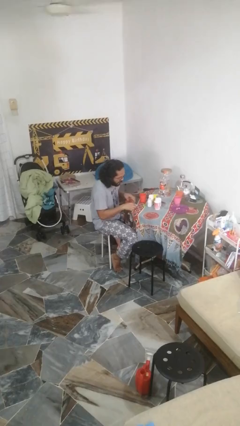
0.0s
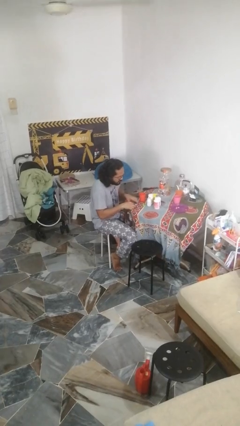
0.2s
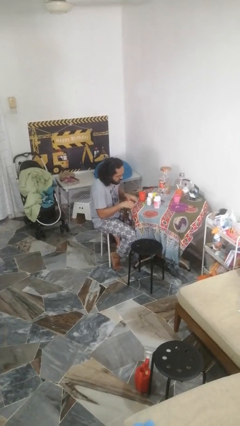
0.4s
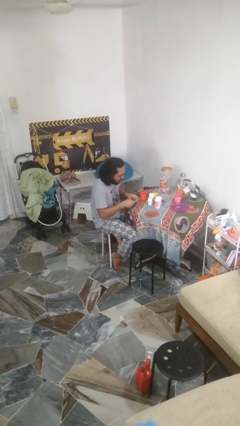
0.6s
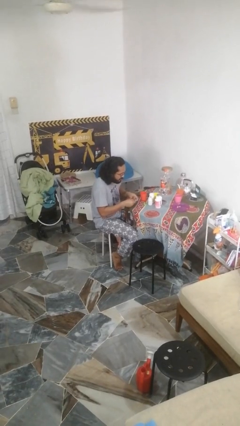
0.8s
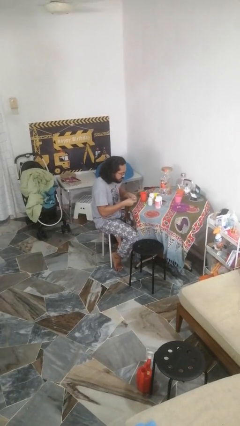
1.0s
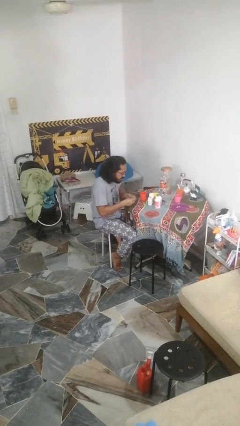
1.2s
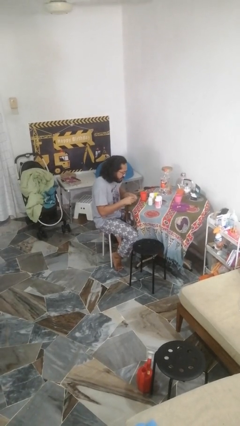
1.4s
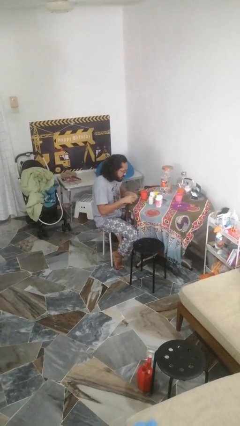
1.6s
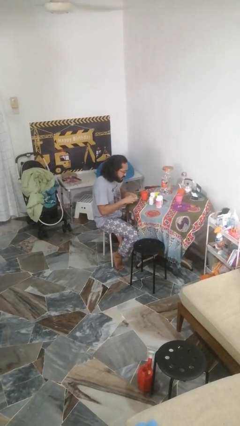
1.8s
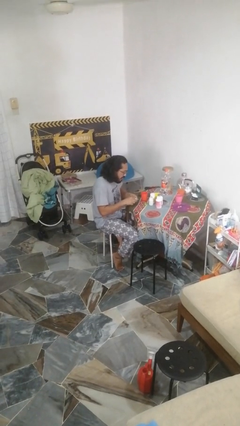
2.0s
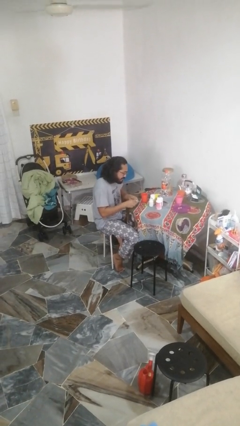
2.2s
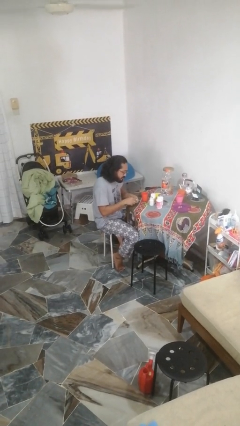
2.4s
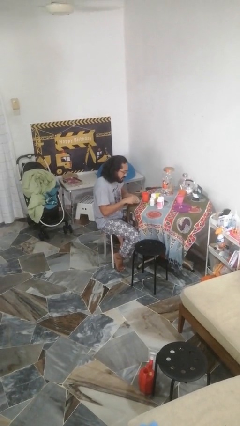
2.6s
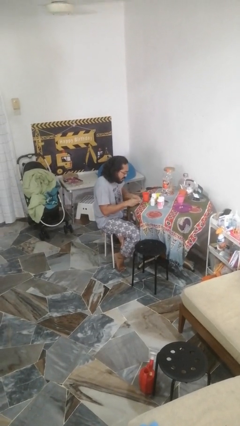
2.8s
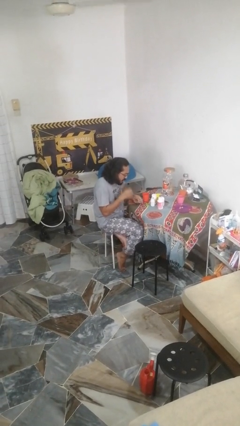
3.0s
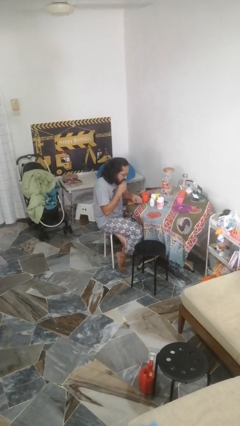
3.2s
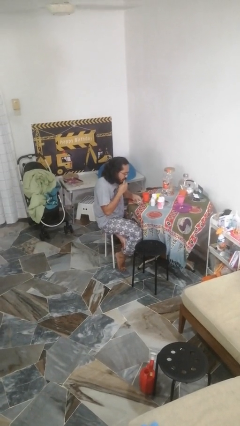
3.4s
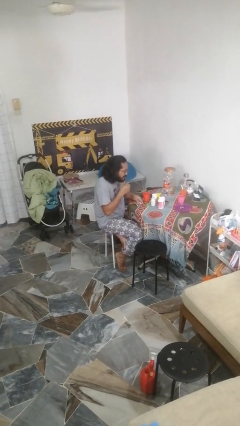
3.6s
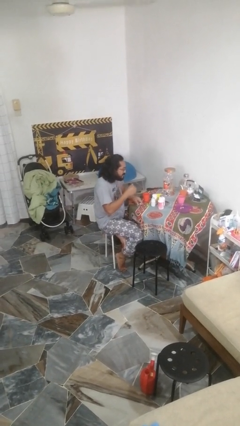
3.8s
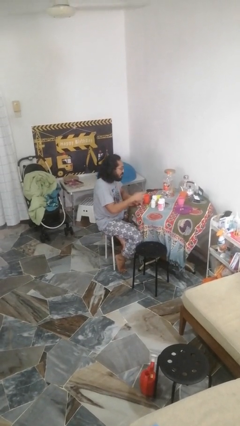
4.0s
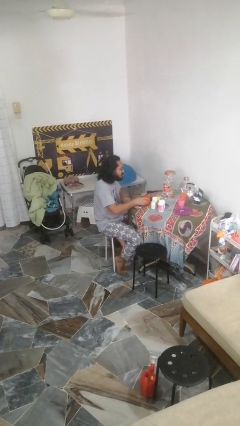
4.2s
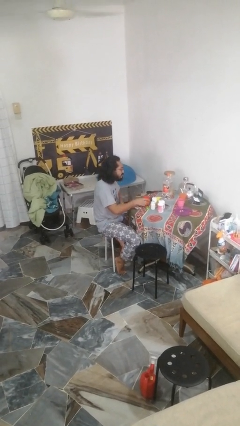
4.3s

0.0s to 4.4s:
person takes medicine pills

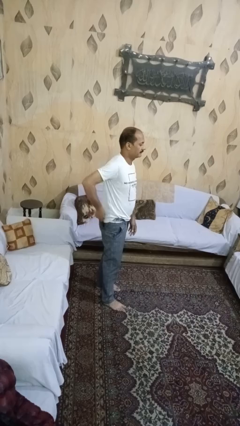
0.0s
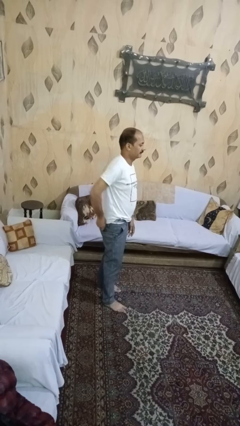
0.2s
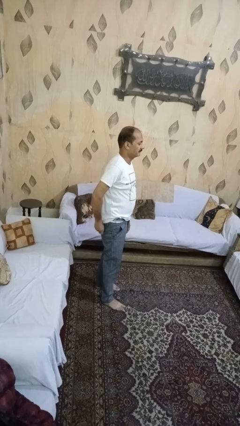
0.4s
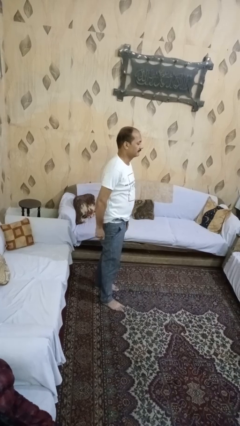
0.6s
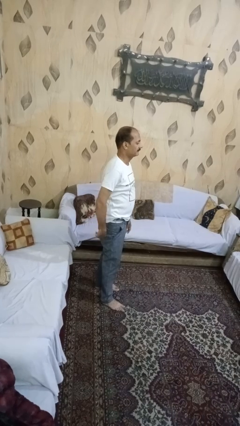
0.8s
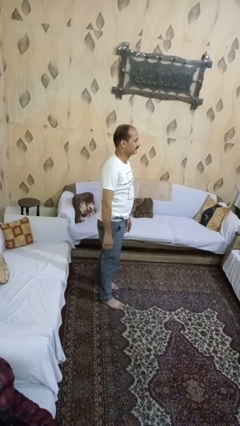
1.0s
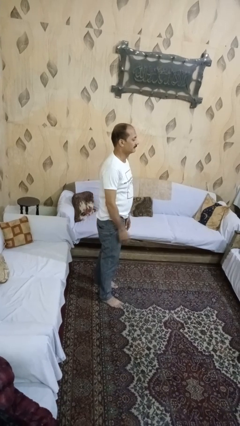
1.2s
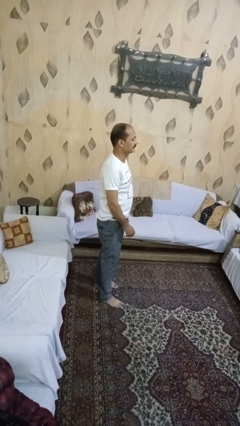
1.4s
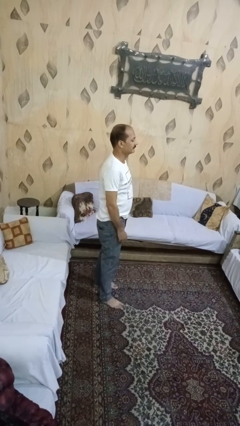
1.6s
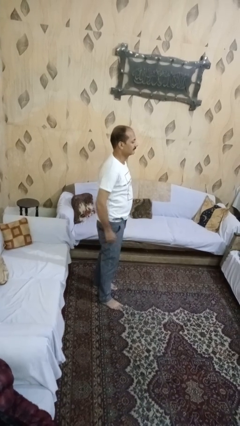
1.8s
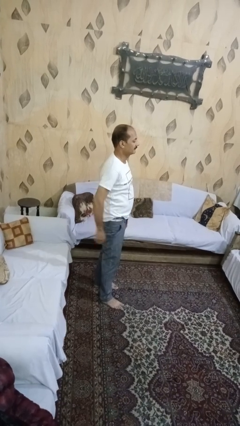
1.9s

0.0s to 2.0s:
person puts phone into pocket

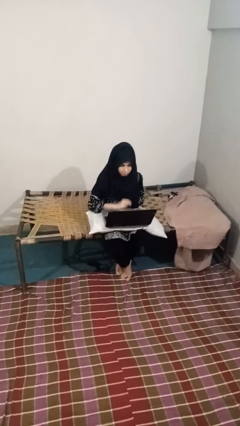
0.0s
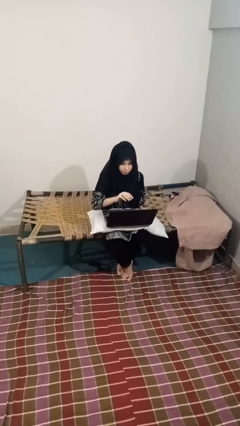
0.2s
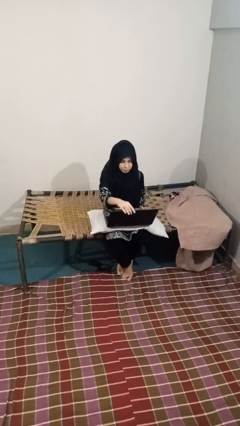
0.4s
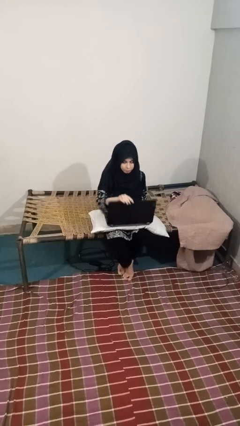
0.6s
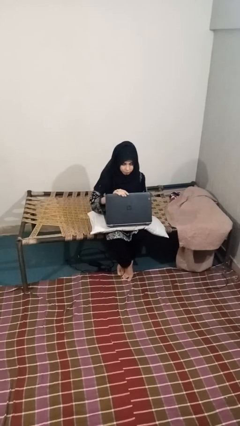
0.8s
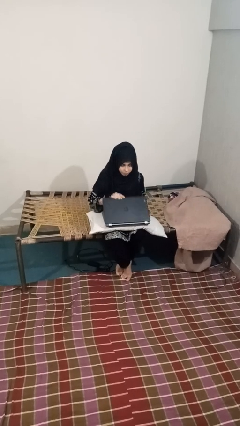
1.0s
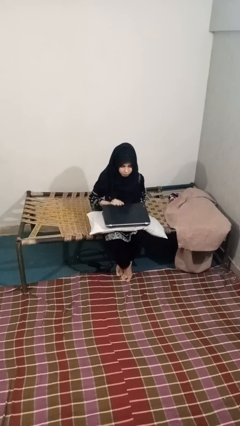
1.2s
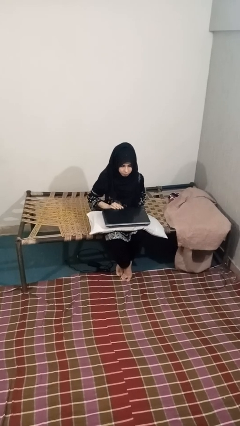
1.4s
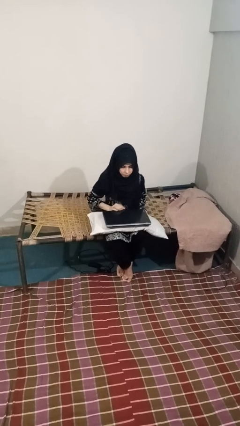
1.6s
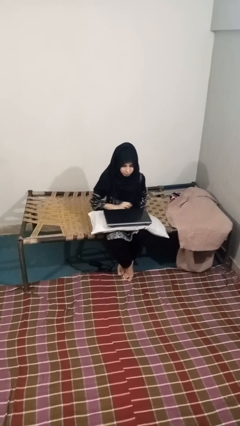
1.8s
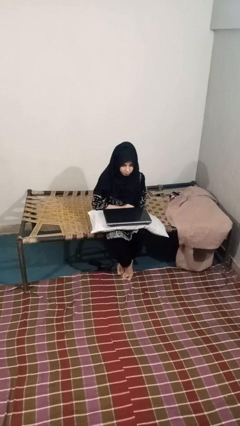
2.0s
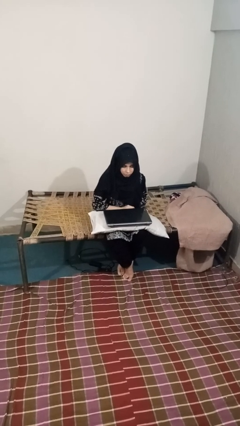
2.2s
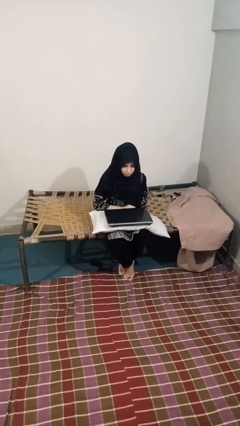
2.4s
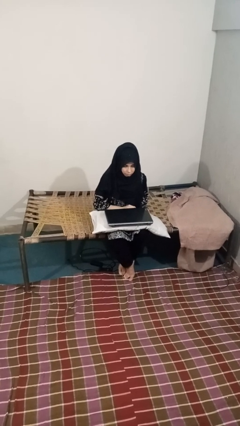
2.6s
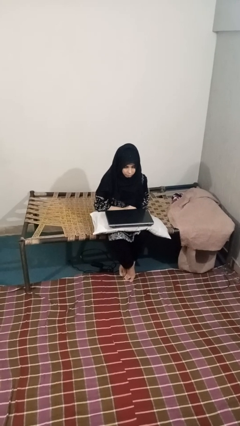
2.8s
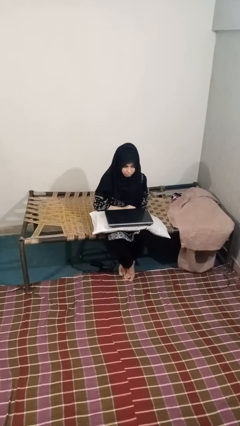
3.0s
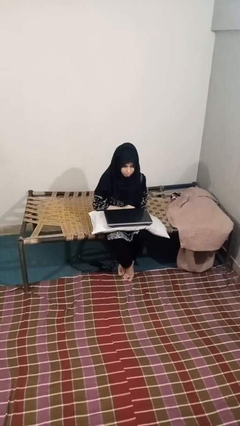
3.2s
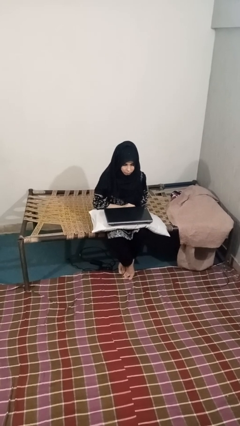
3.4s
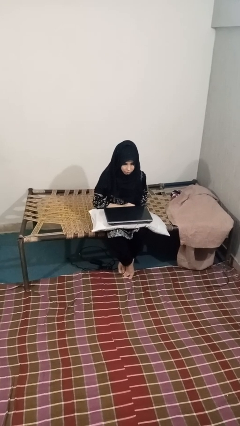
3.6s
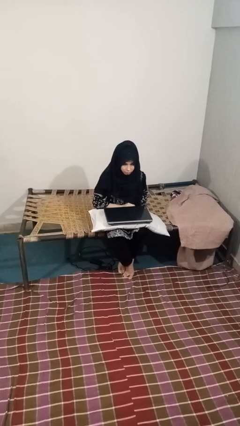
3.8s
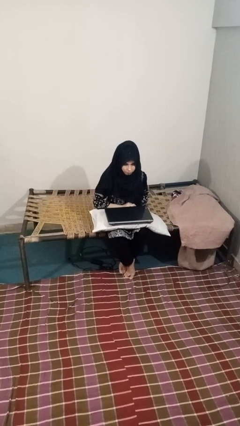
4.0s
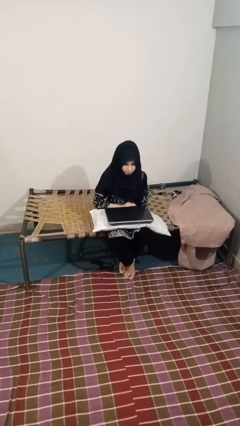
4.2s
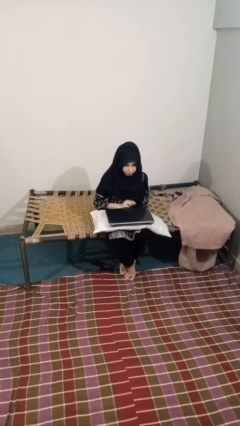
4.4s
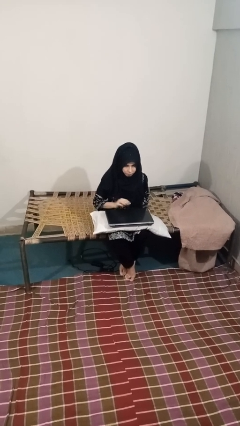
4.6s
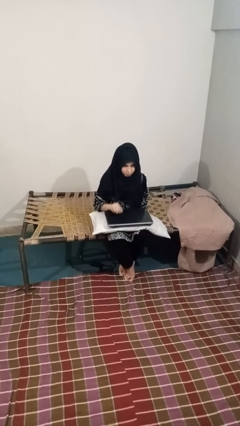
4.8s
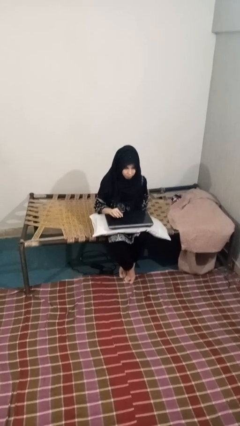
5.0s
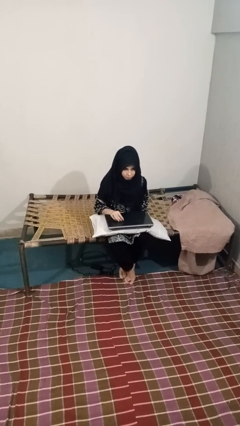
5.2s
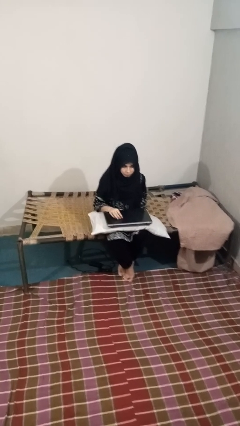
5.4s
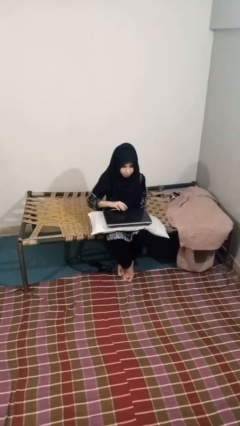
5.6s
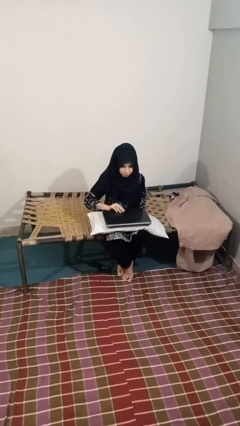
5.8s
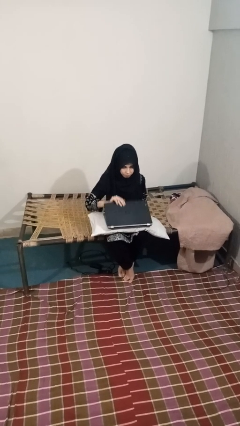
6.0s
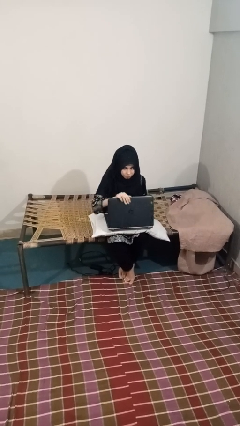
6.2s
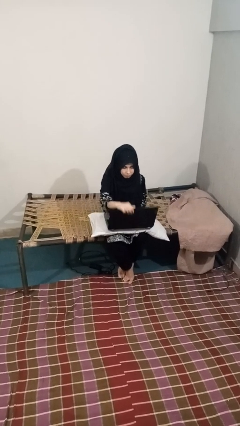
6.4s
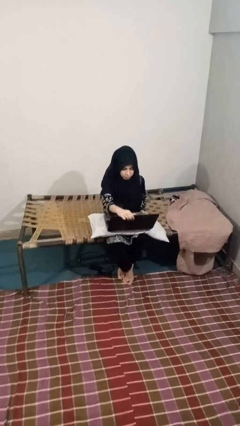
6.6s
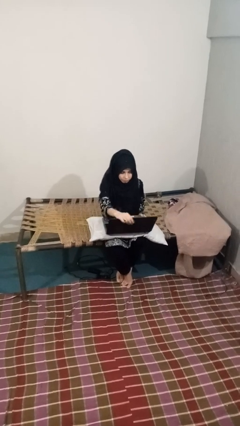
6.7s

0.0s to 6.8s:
person closes laptop

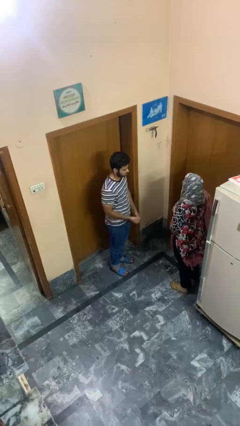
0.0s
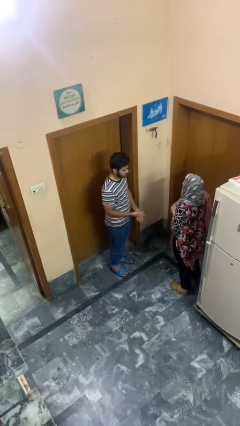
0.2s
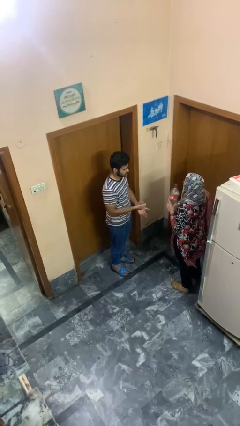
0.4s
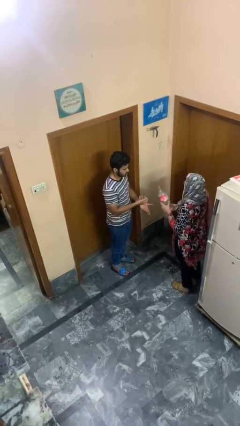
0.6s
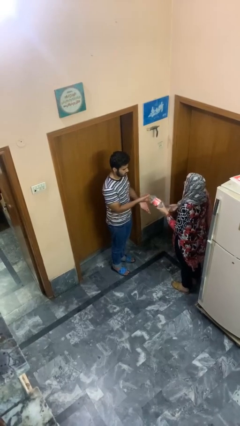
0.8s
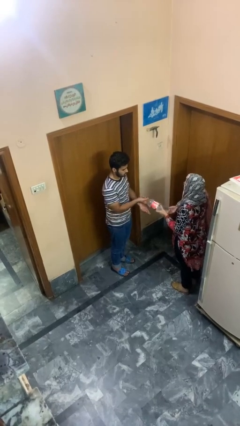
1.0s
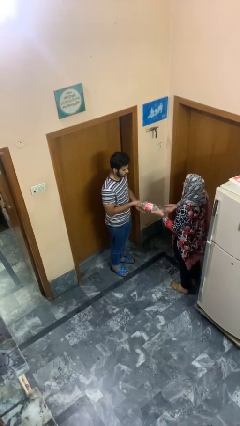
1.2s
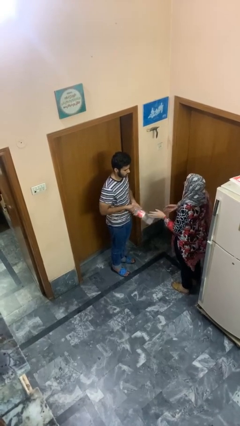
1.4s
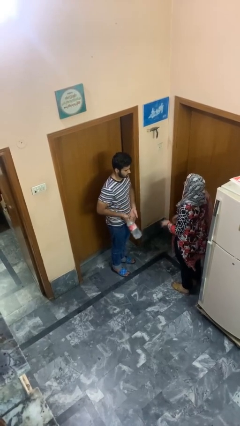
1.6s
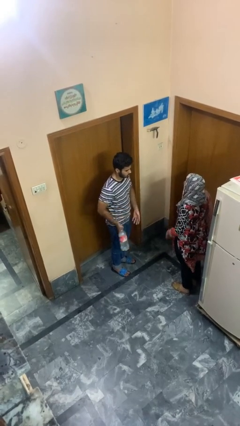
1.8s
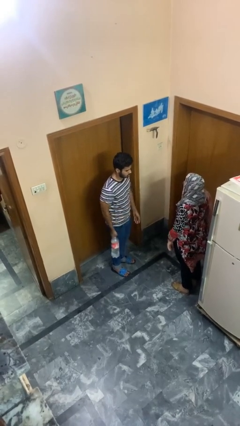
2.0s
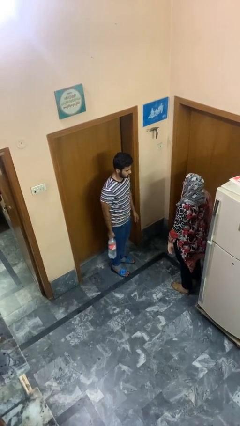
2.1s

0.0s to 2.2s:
person transfers object to person

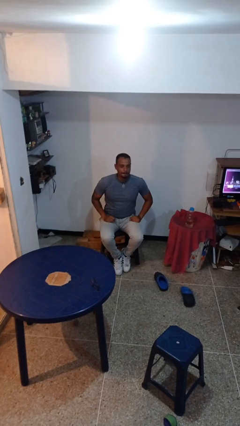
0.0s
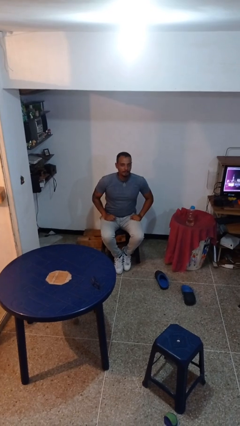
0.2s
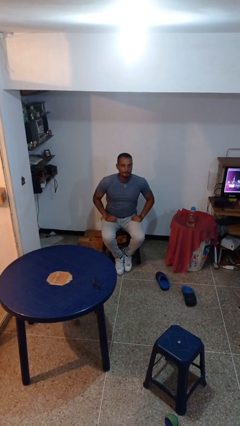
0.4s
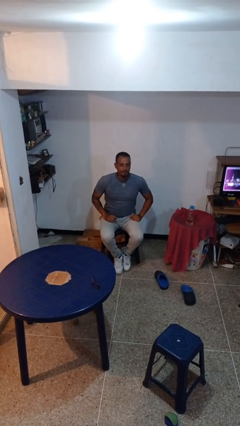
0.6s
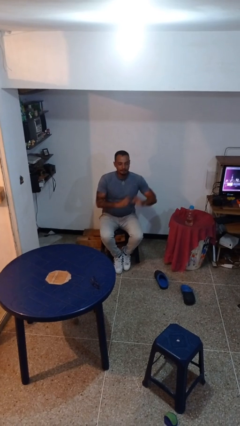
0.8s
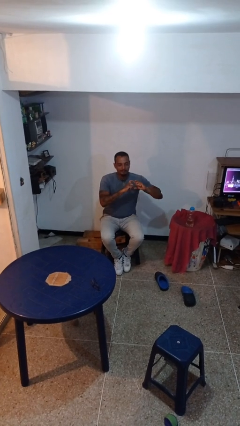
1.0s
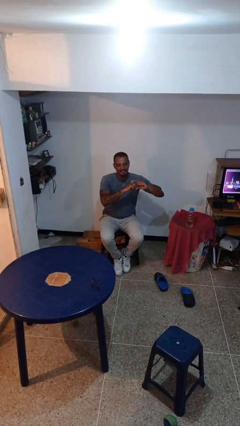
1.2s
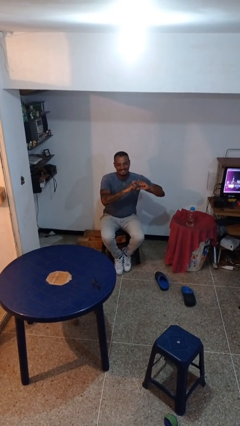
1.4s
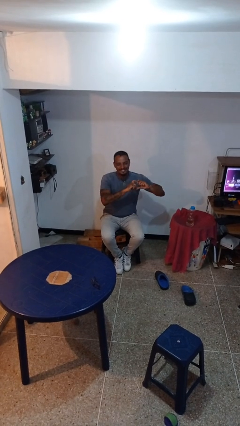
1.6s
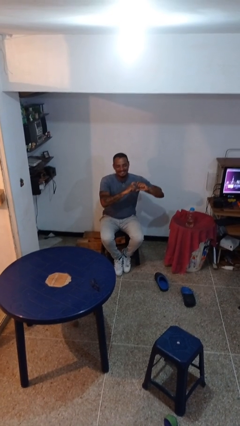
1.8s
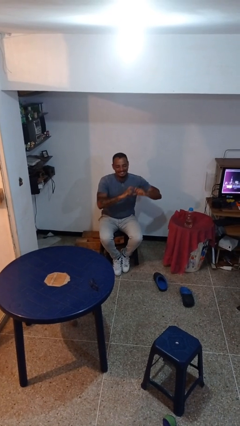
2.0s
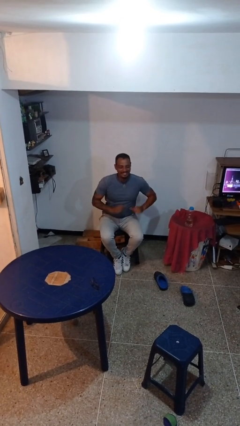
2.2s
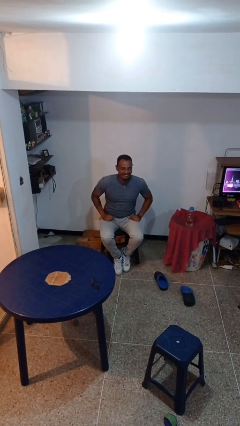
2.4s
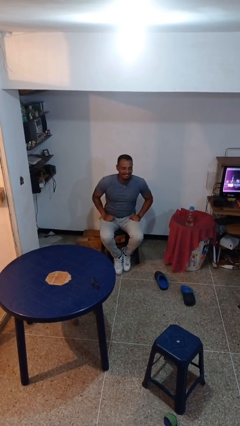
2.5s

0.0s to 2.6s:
person gestures heart
